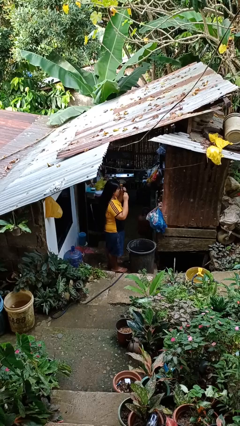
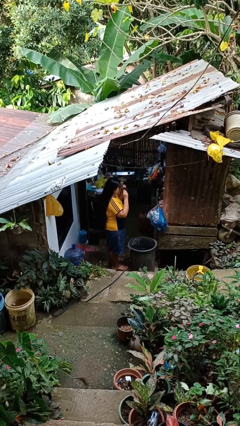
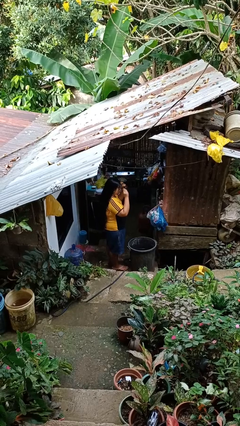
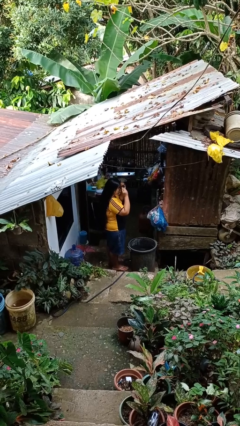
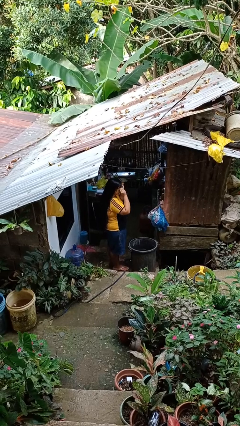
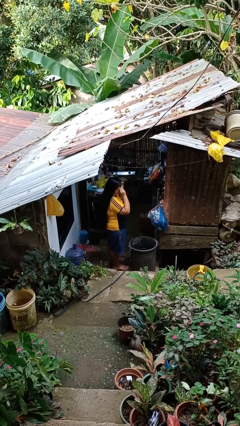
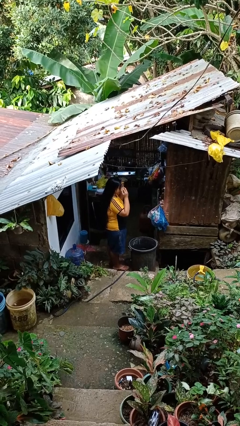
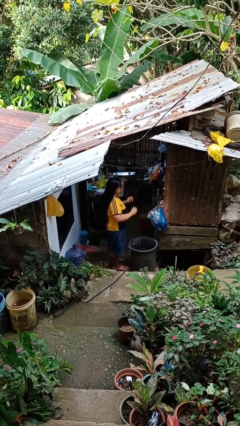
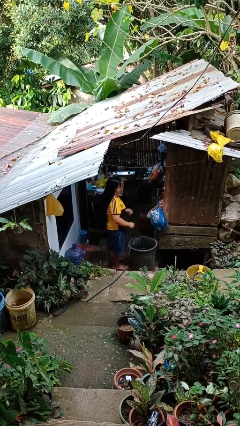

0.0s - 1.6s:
person puts on sunglasses

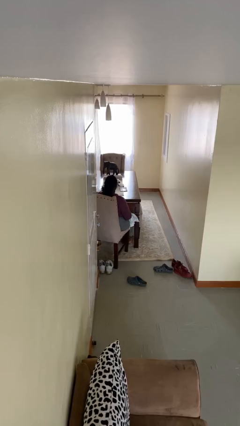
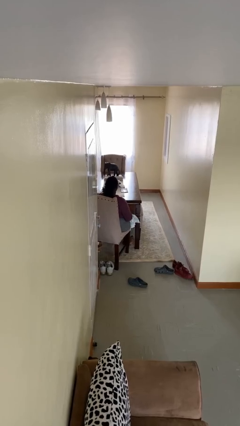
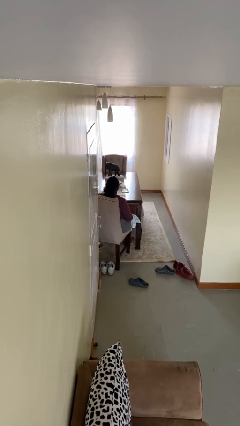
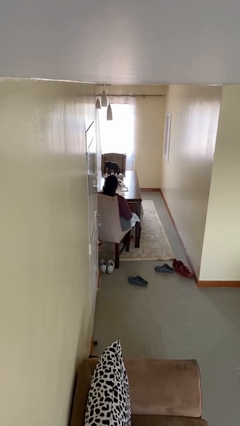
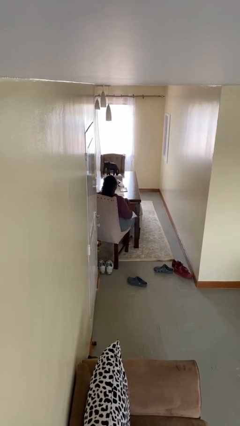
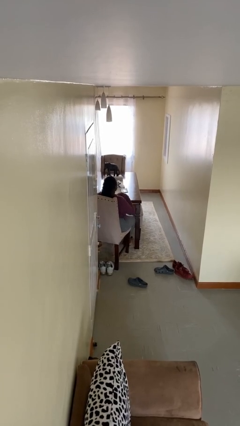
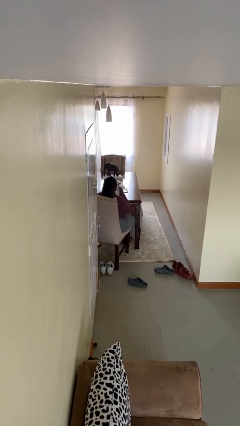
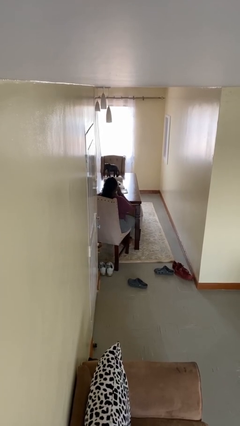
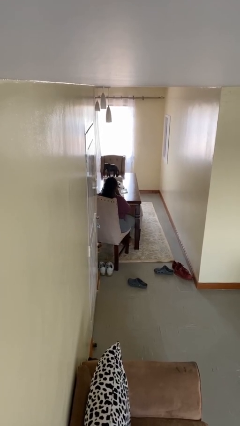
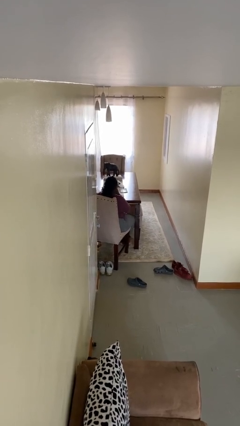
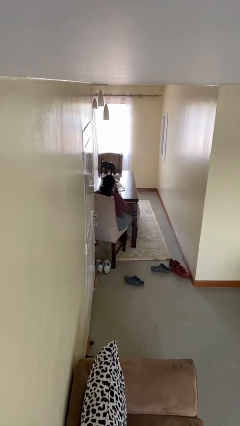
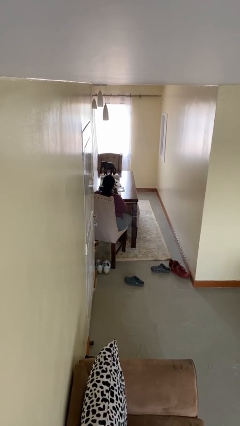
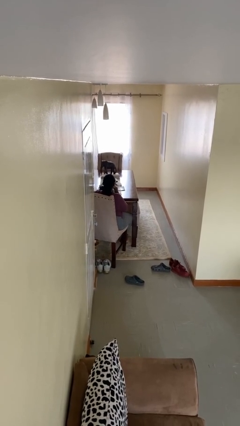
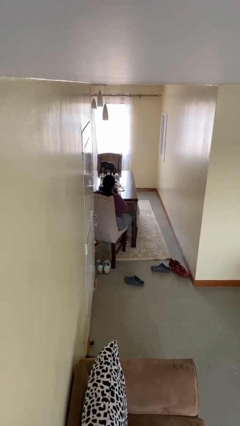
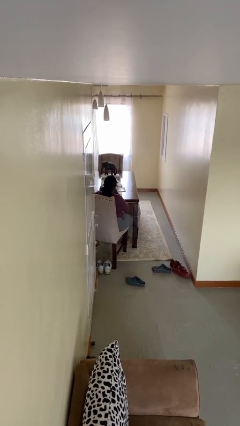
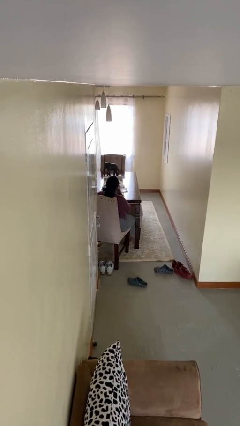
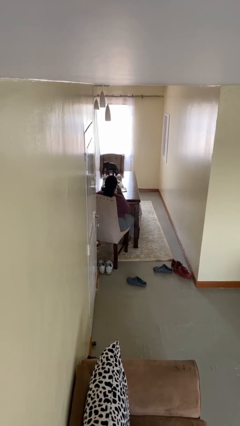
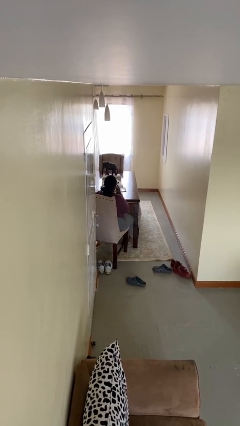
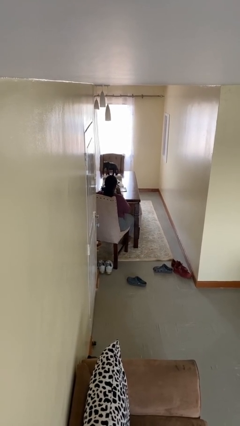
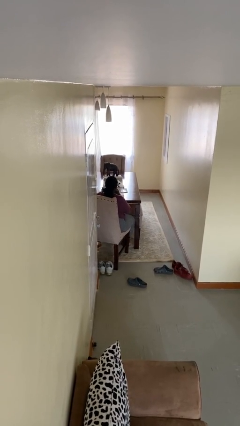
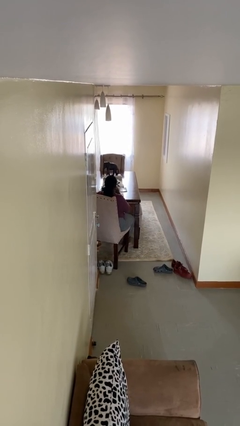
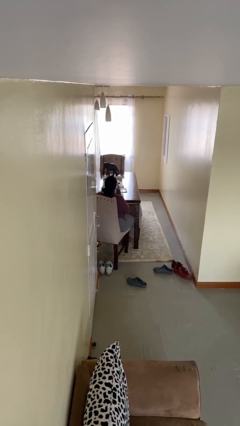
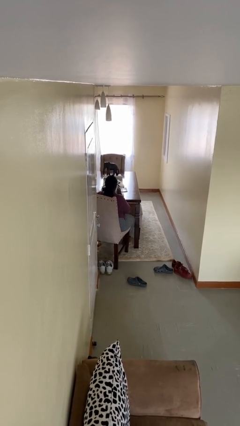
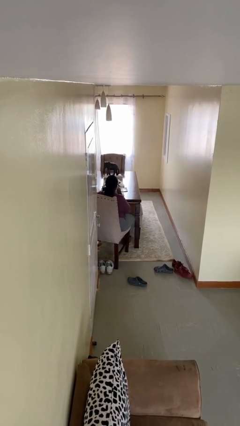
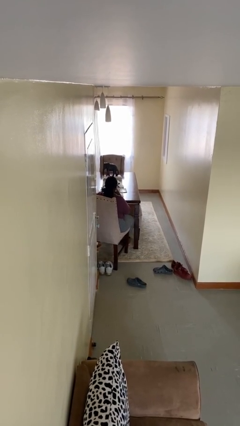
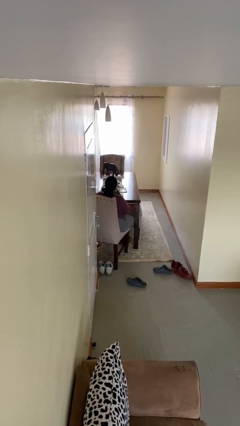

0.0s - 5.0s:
person wipes mouth with napkin

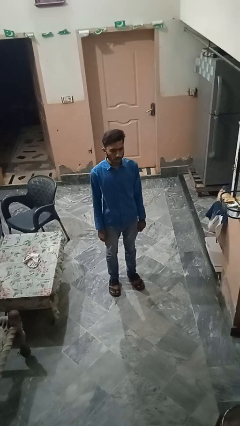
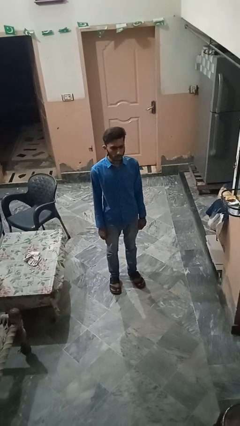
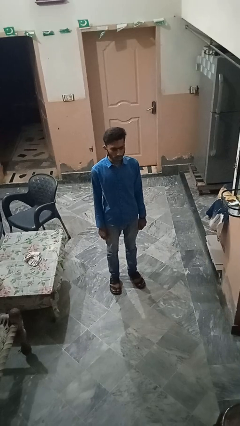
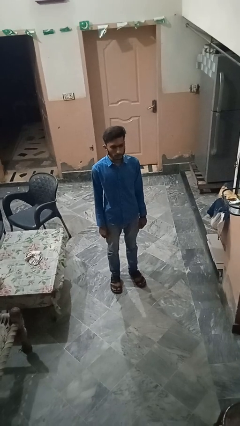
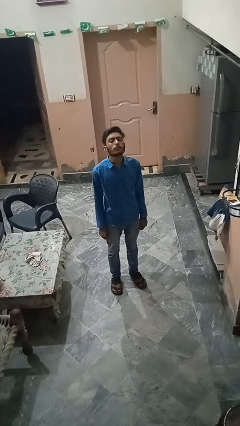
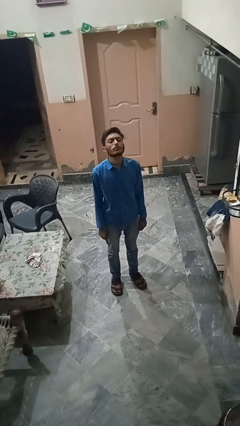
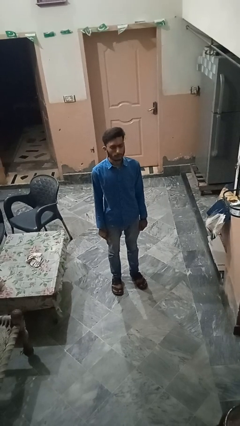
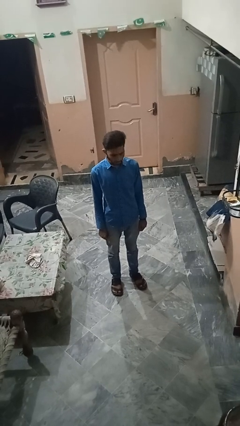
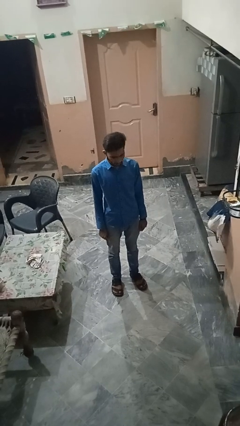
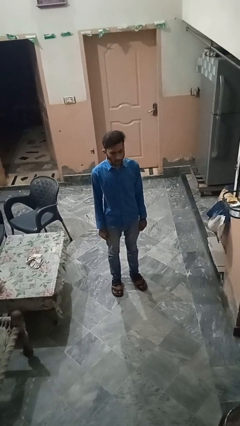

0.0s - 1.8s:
person nods head

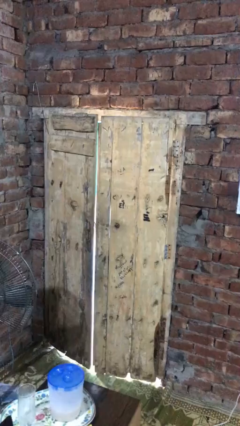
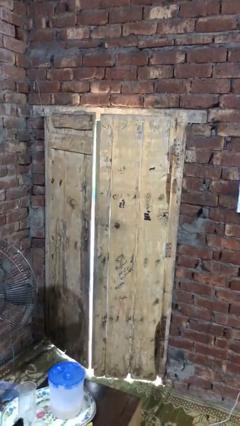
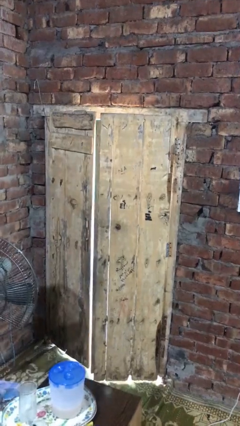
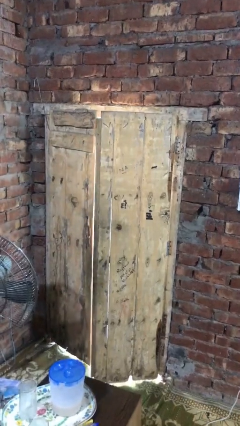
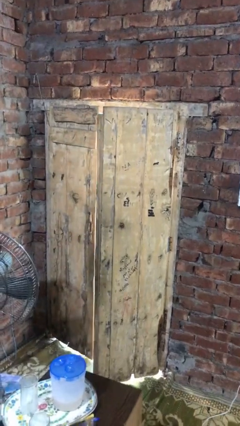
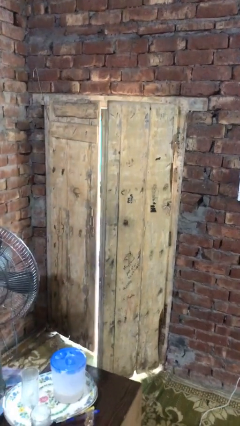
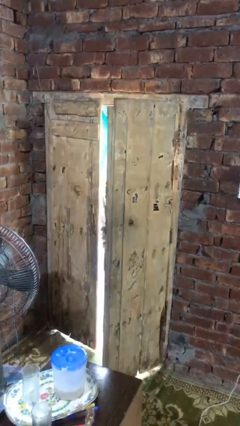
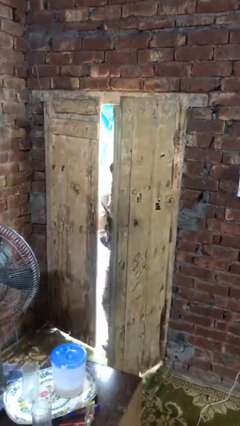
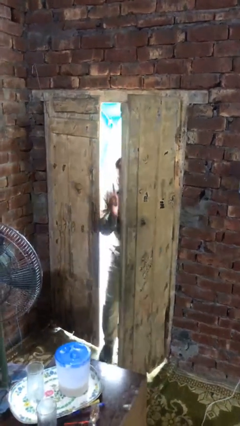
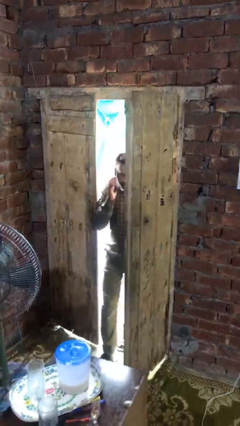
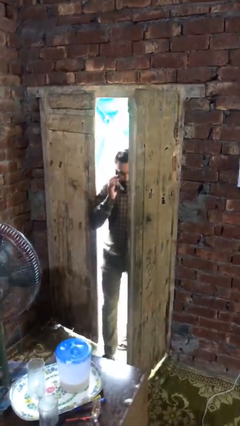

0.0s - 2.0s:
person opens facility door

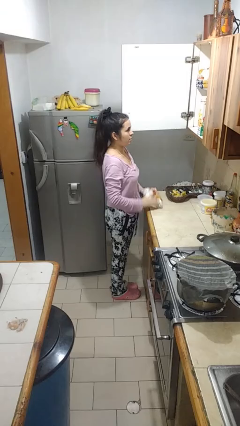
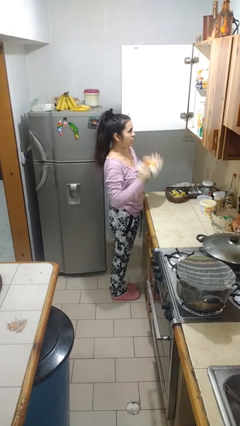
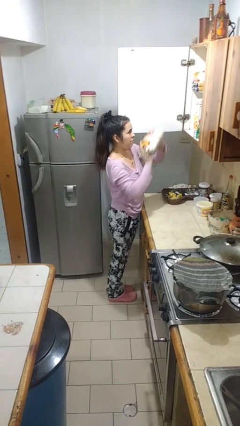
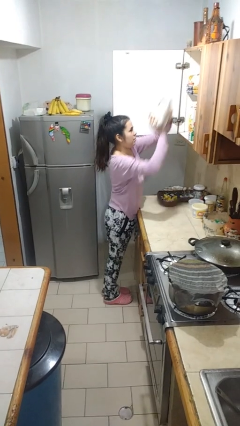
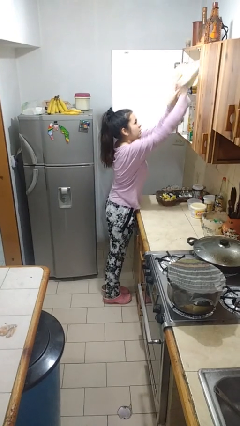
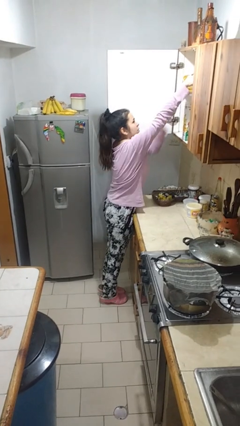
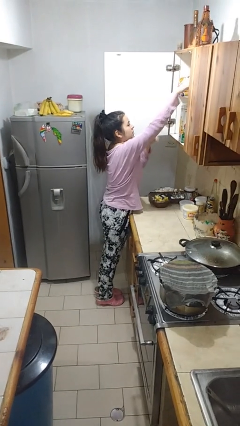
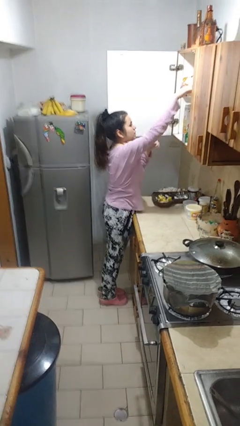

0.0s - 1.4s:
person puts object in cabinet

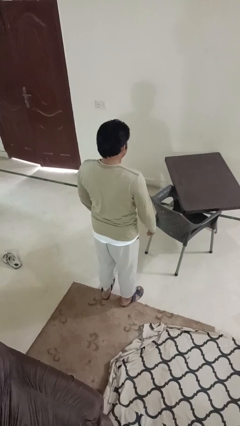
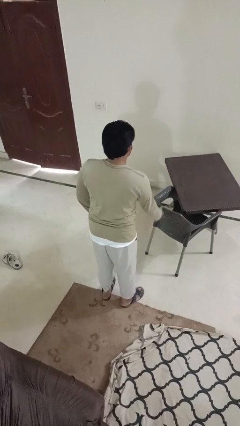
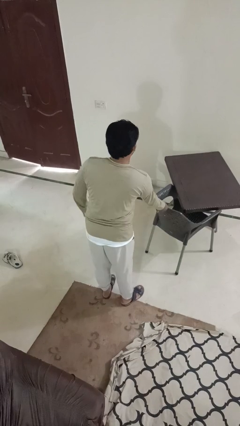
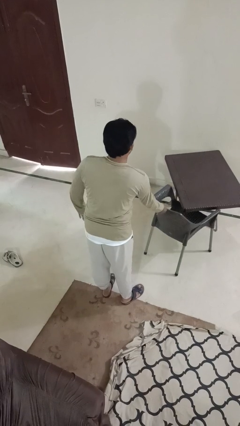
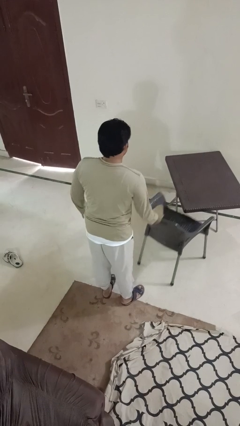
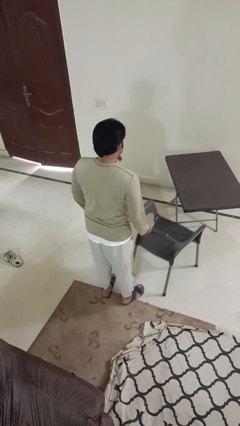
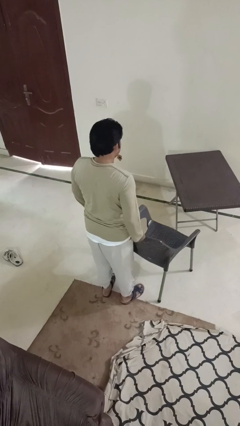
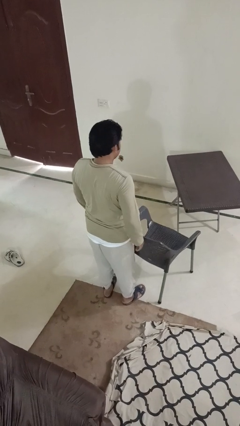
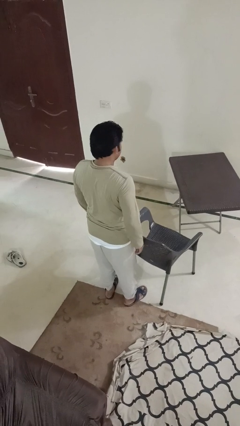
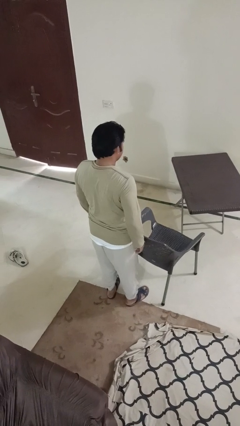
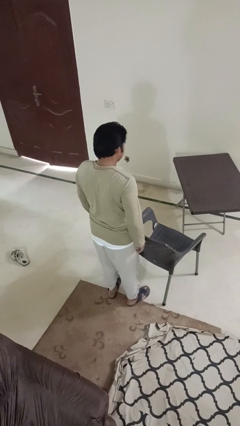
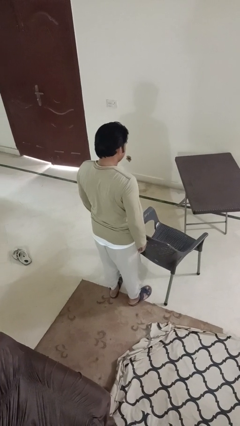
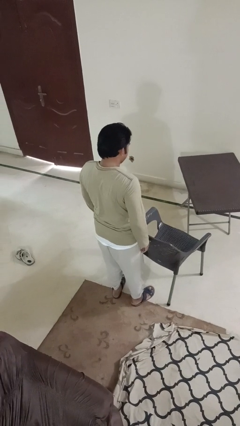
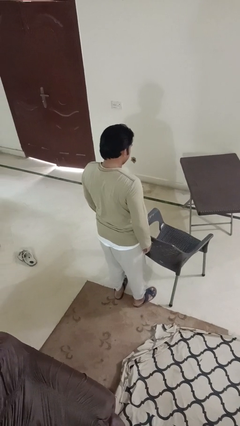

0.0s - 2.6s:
person pulls out chair

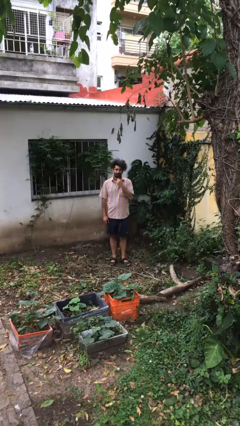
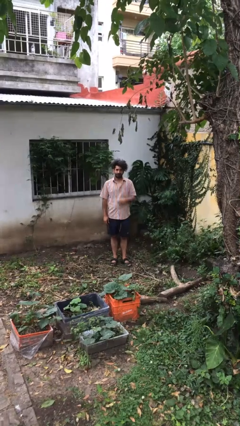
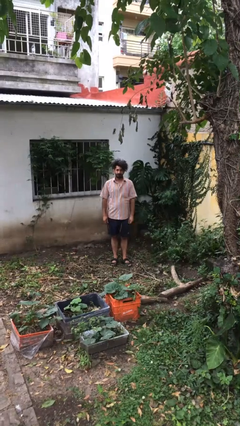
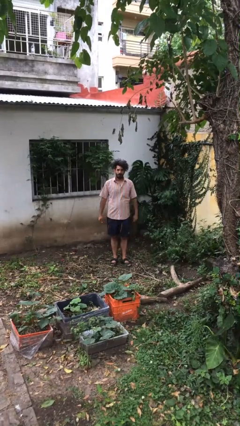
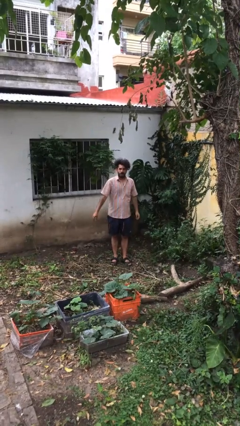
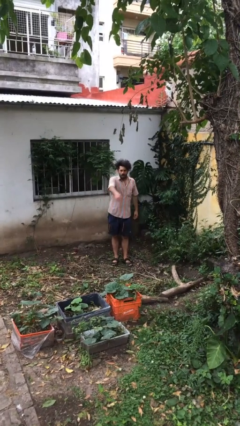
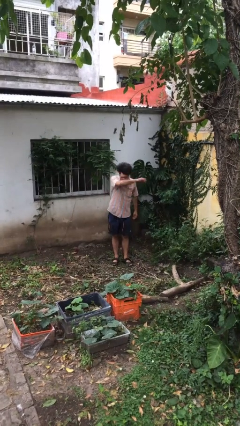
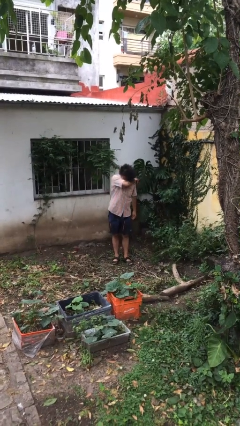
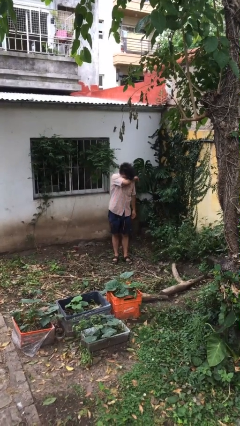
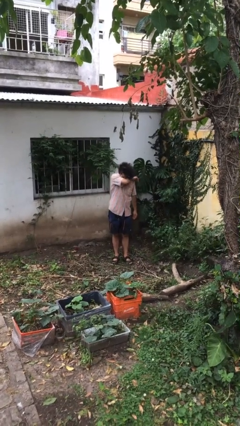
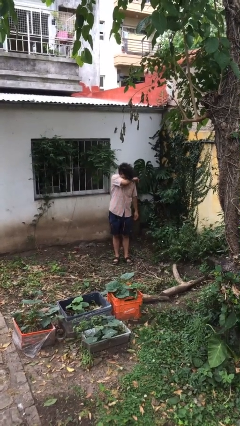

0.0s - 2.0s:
person sneezes into arm

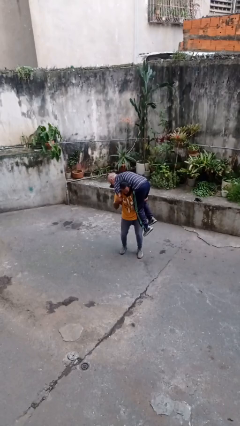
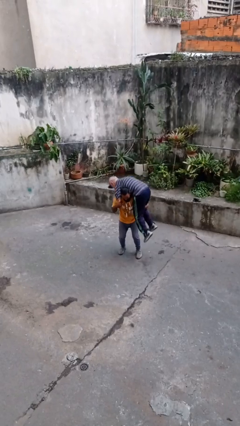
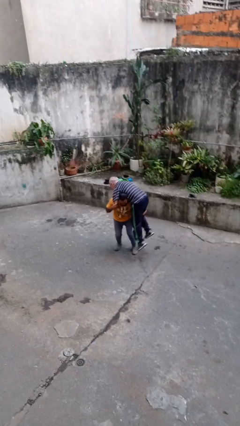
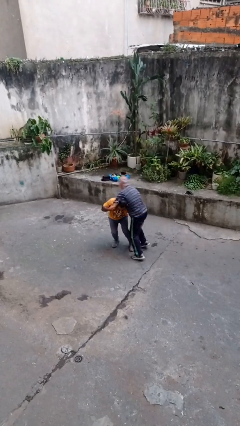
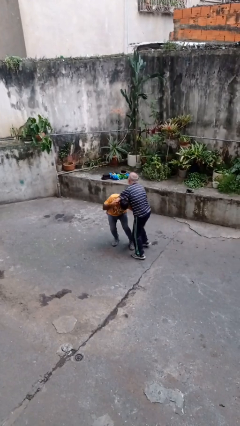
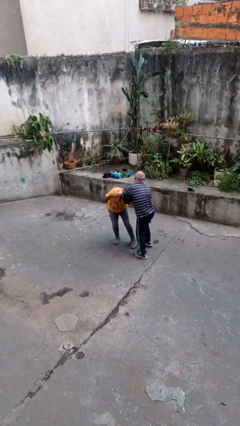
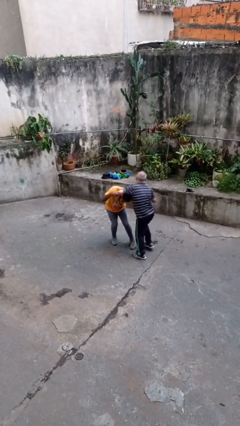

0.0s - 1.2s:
person puts down person
